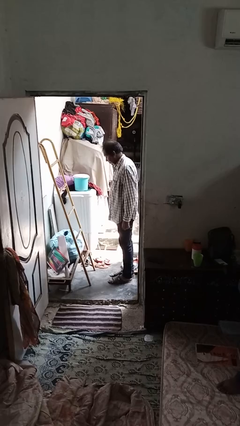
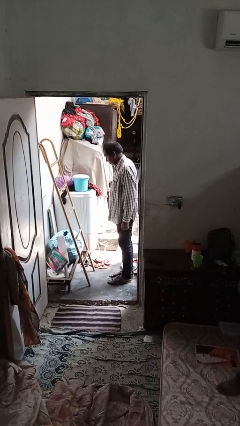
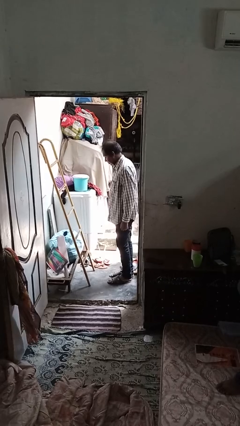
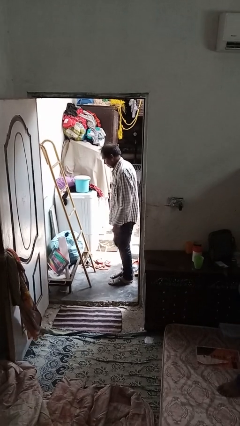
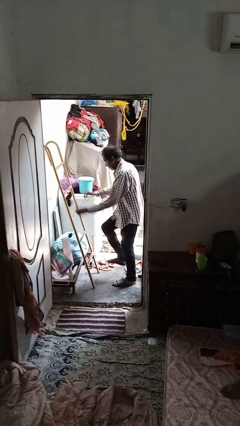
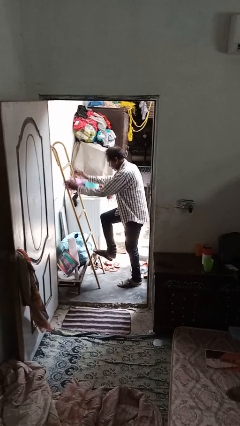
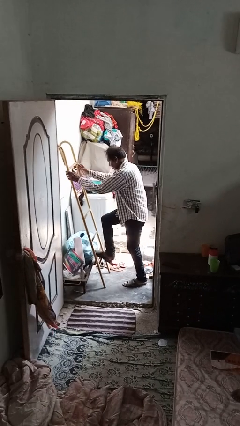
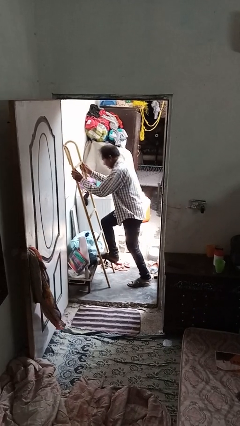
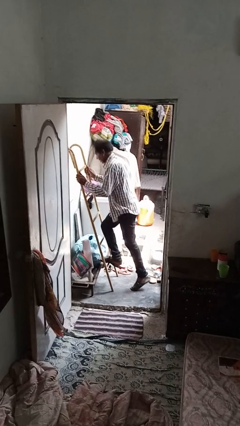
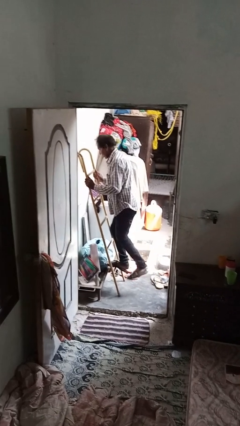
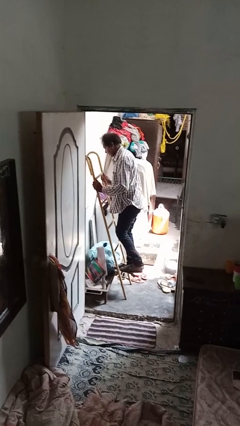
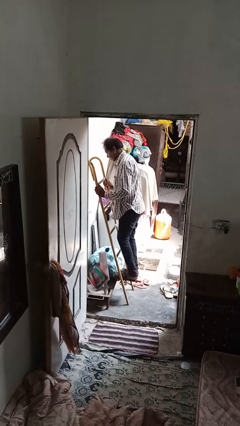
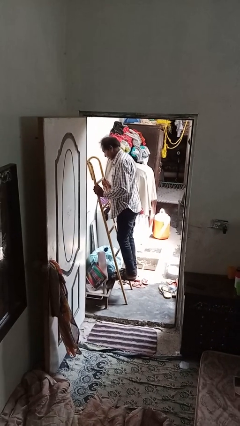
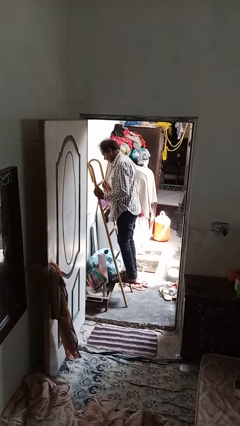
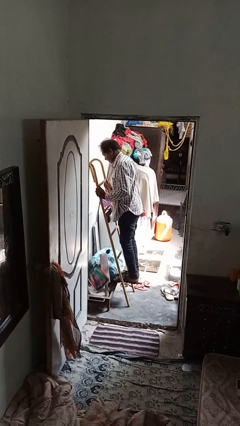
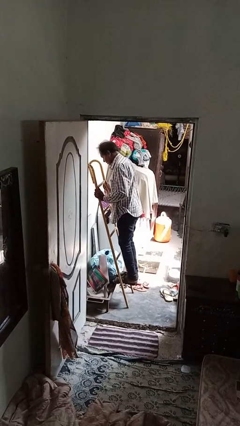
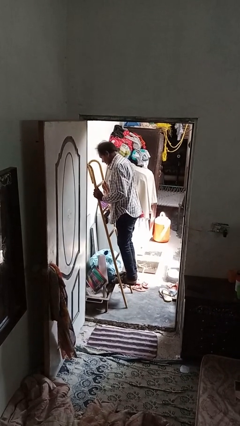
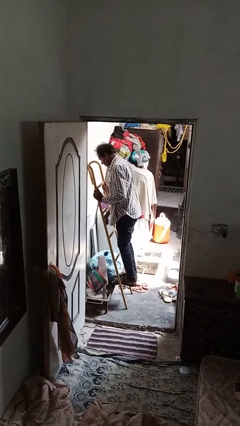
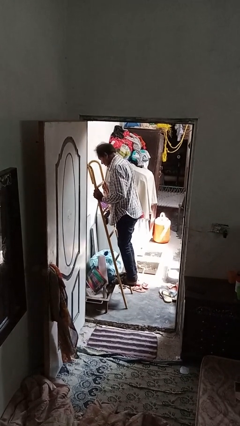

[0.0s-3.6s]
person climbs up ladder

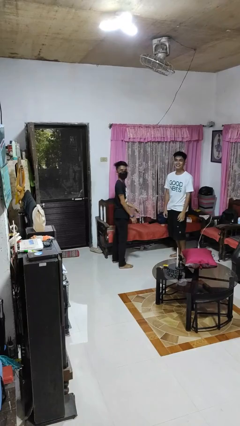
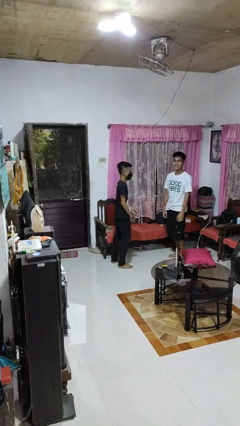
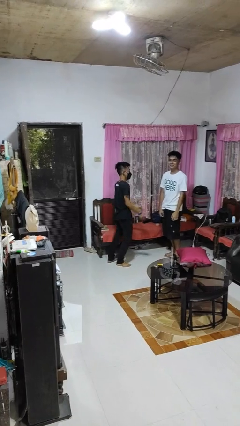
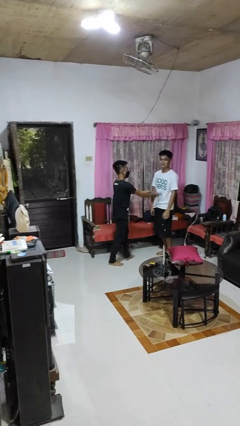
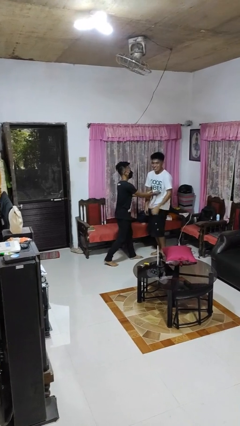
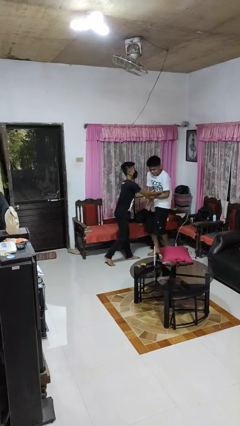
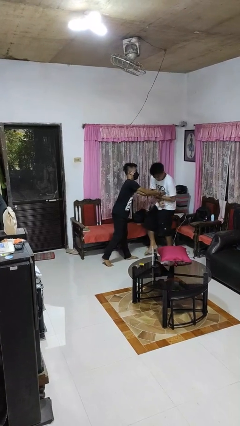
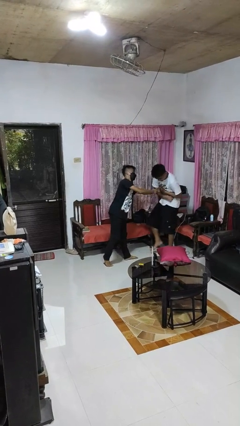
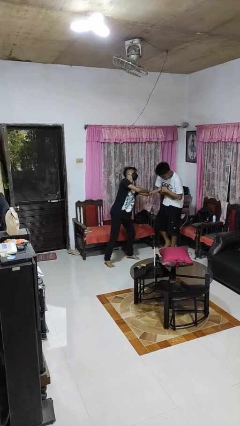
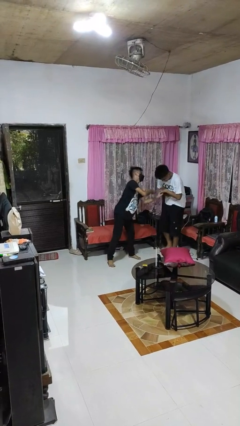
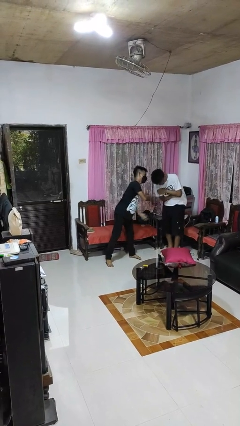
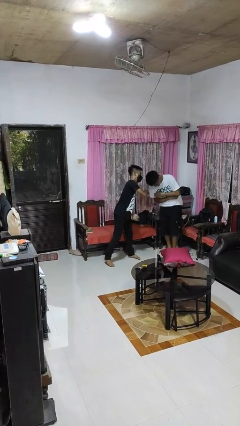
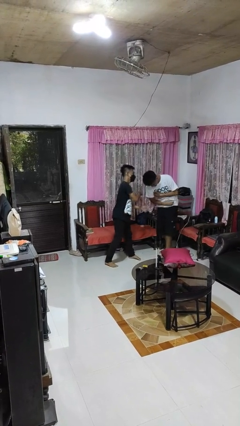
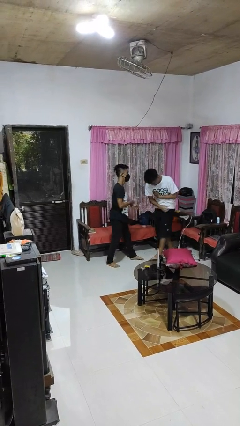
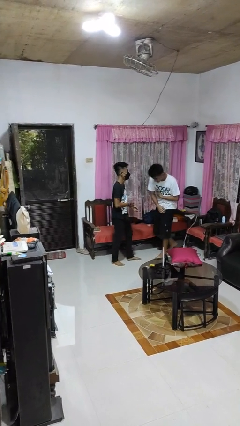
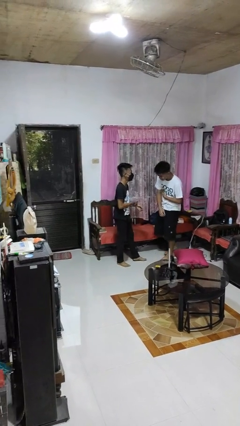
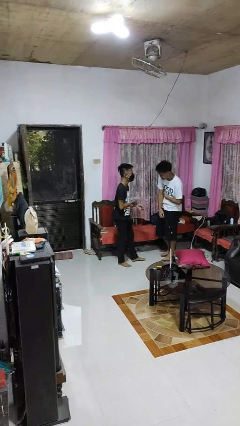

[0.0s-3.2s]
person tickles person

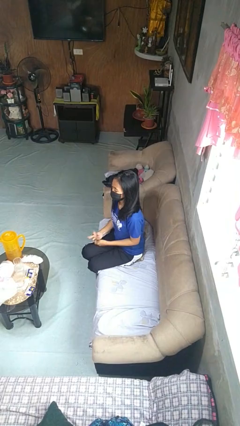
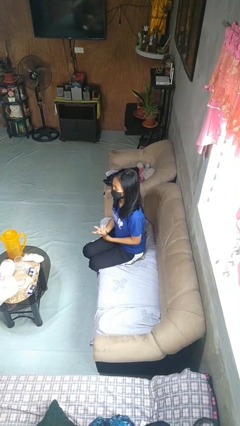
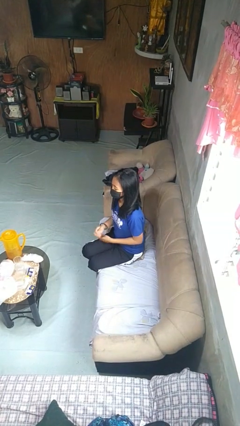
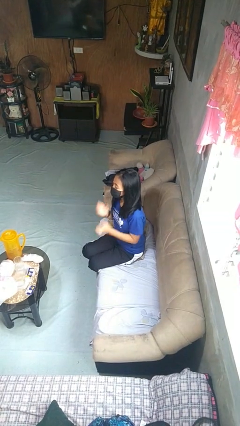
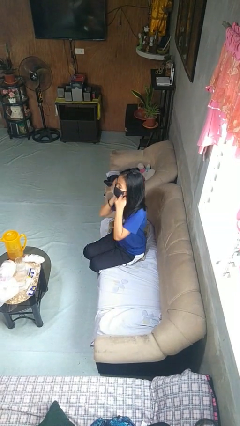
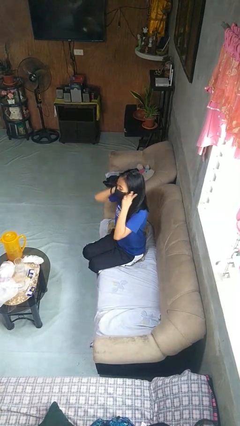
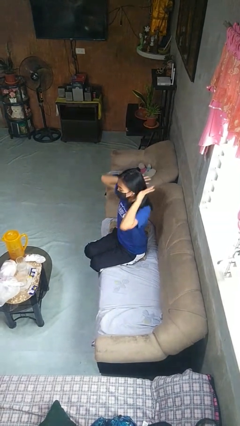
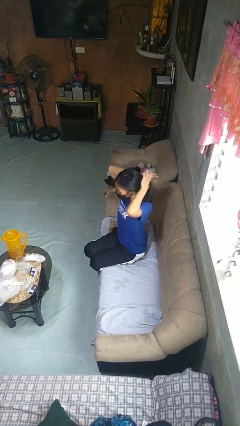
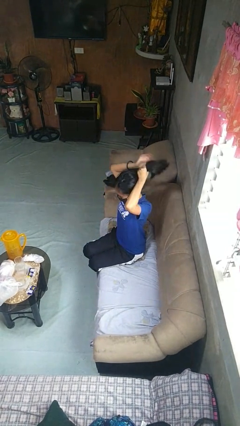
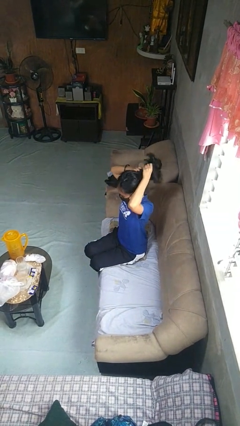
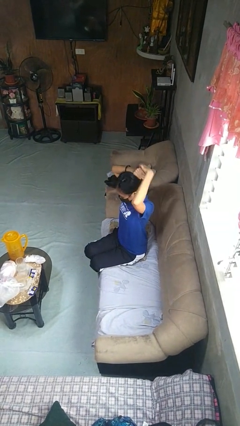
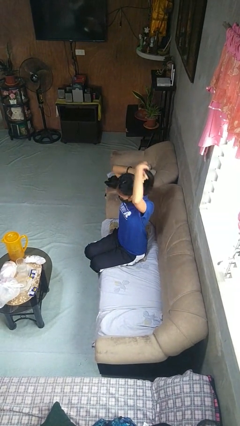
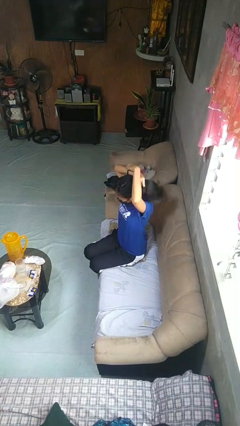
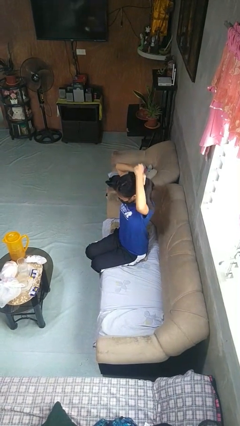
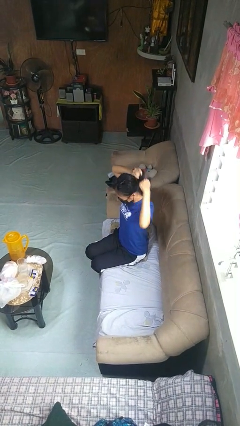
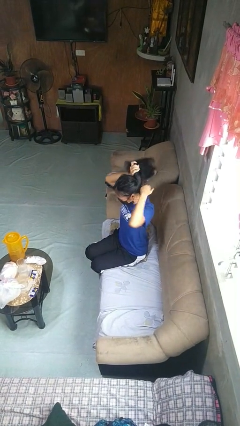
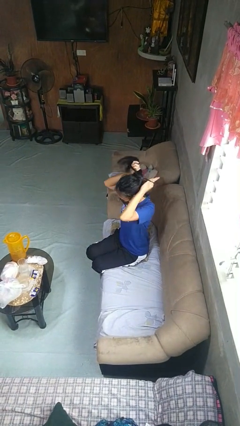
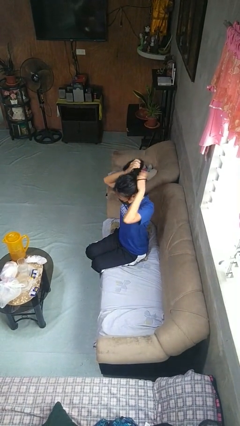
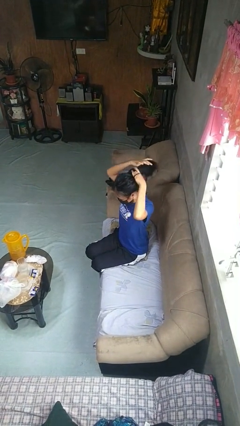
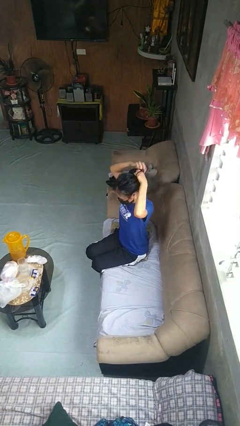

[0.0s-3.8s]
person puts hair in ponytail

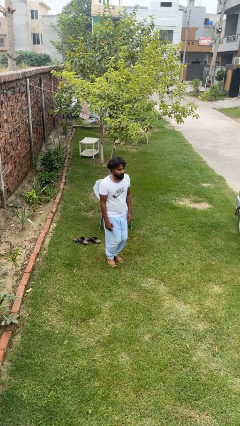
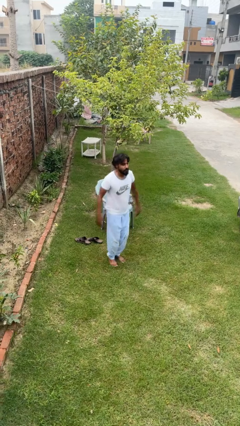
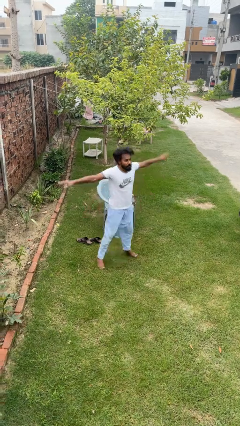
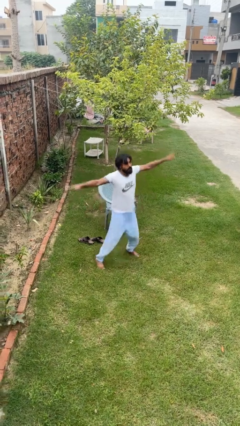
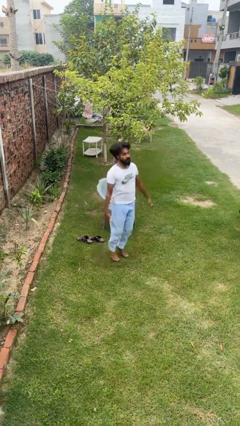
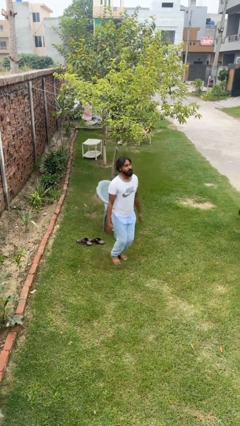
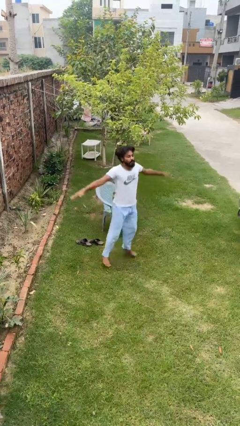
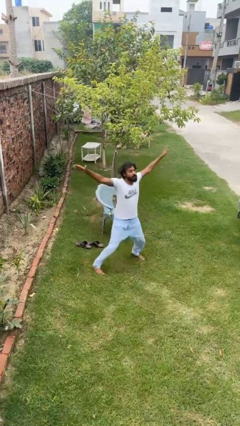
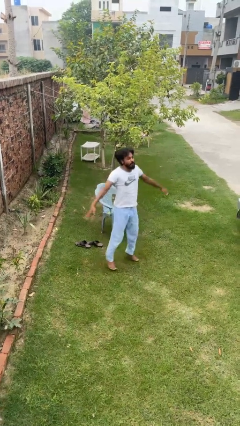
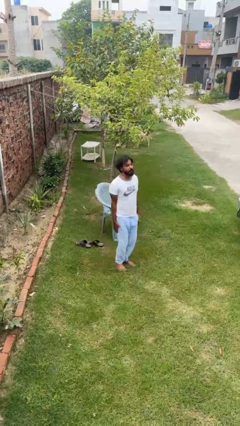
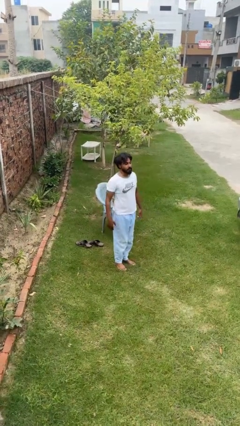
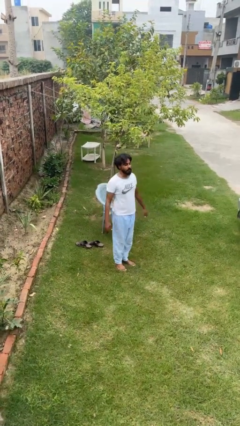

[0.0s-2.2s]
person exercises with jumping jacks

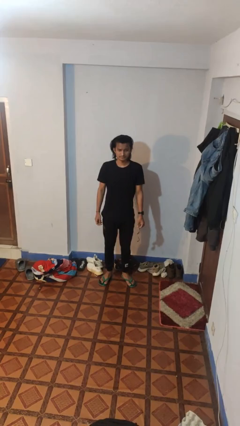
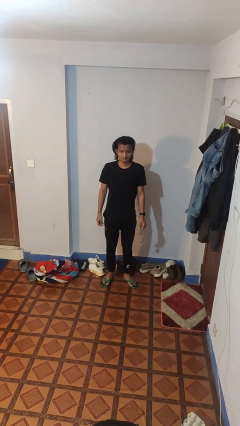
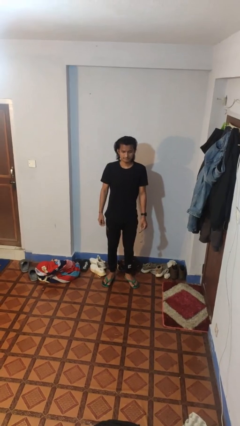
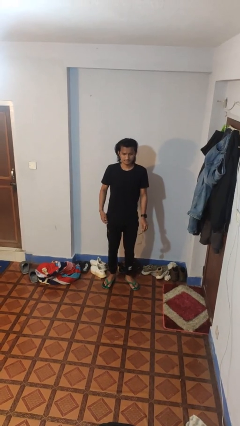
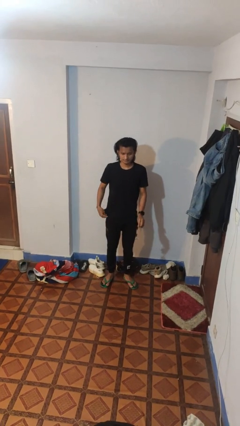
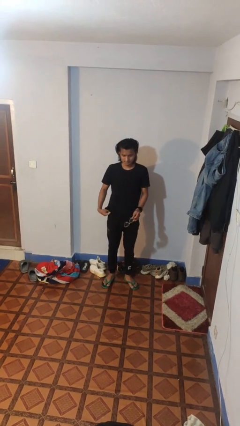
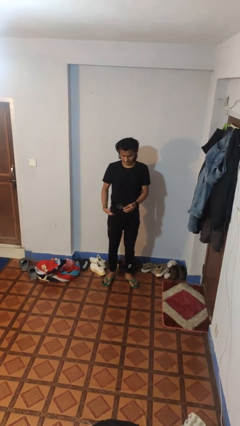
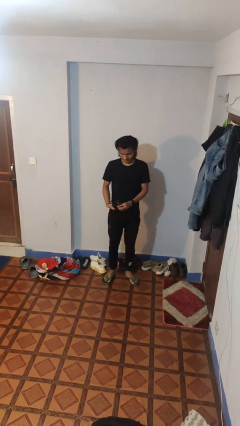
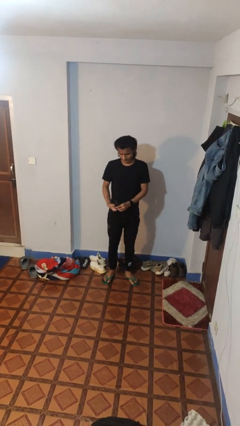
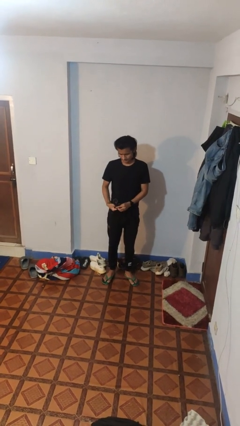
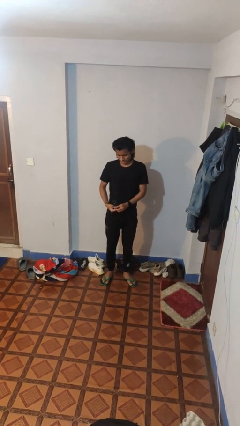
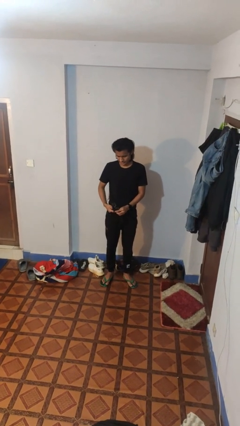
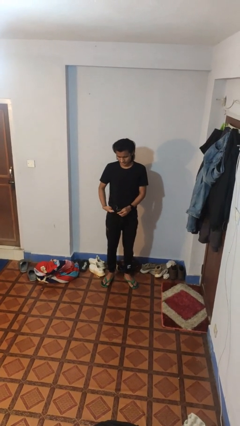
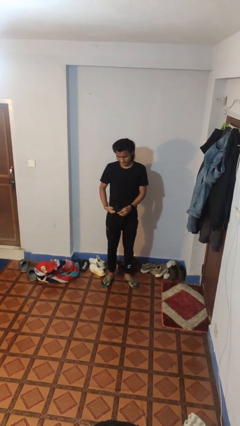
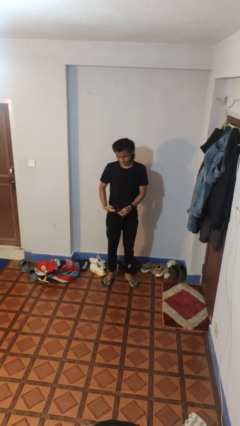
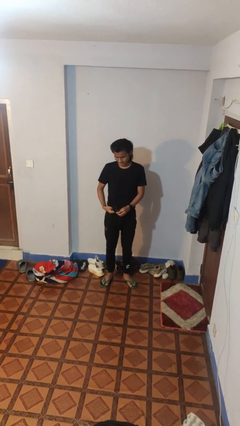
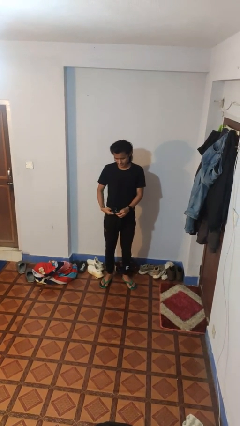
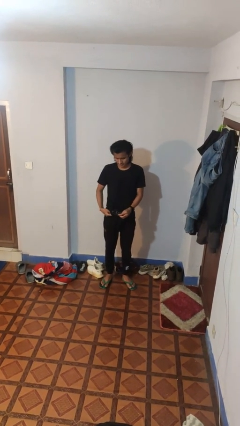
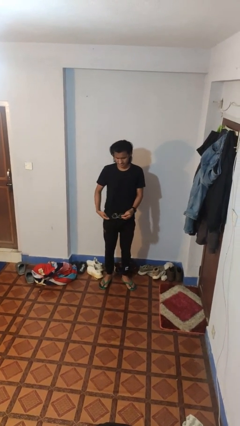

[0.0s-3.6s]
person cleans eyeglasses

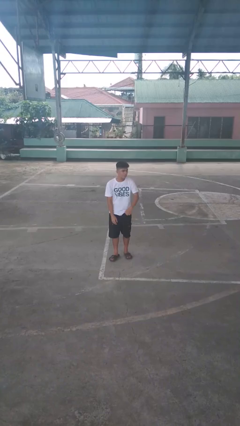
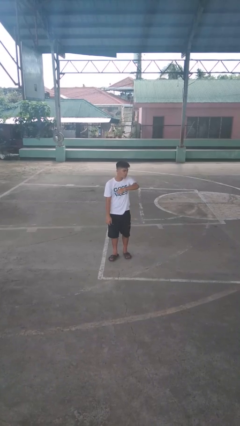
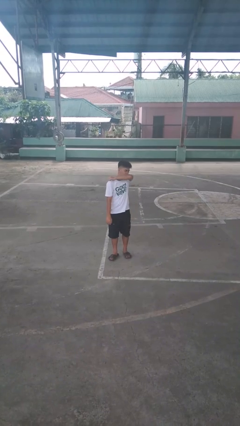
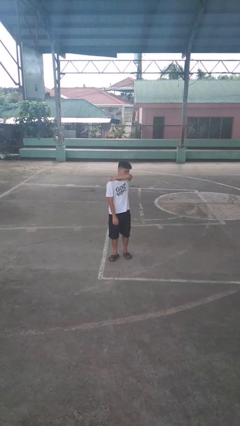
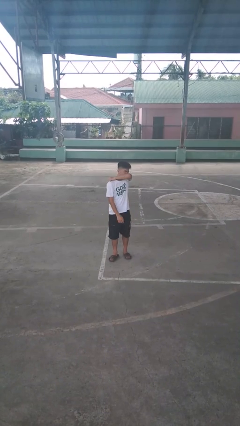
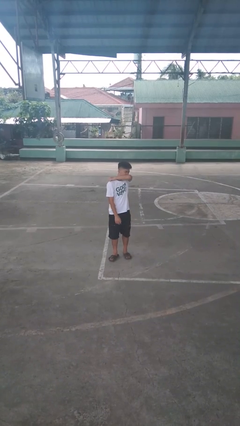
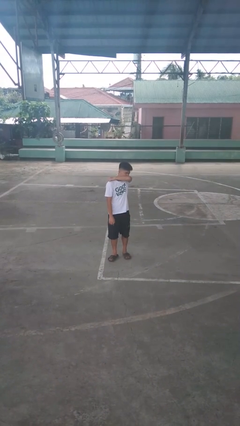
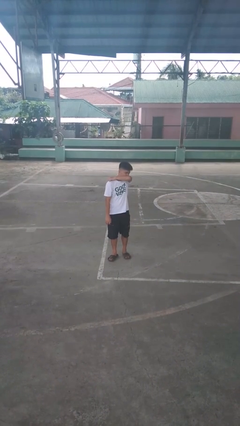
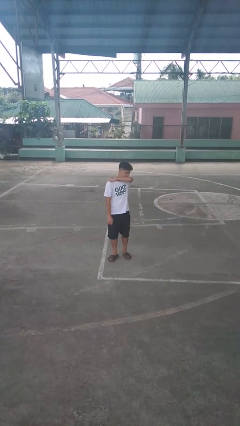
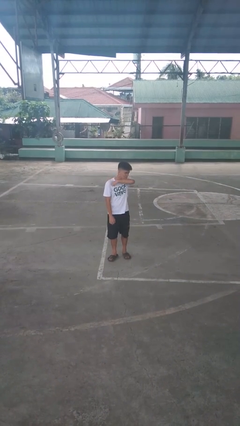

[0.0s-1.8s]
person sneezes into arm
